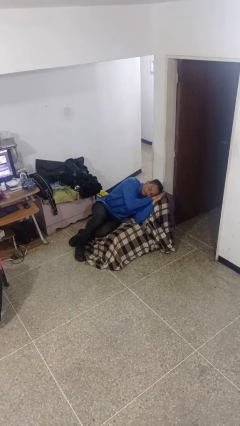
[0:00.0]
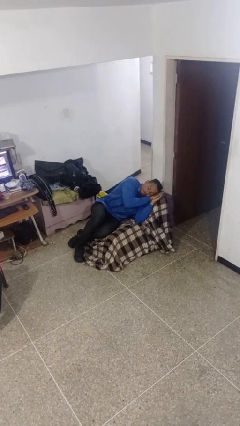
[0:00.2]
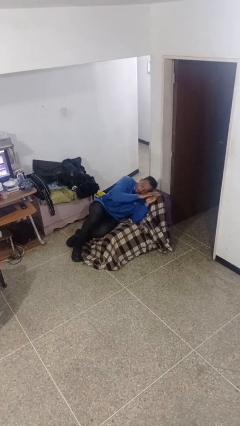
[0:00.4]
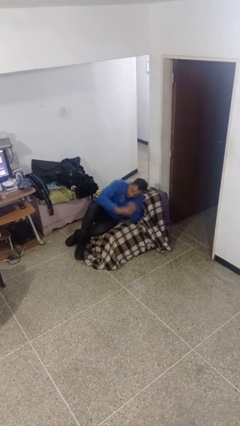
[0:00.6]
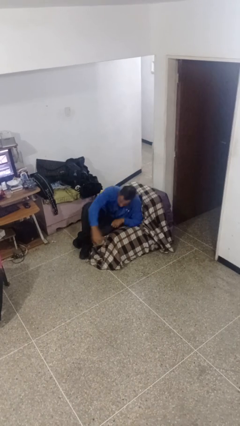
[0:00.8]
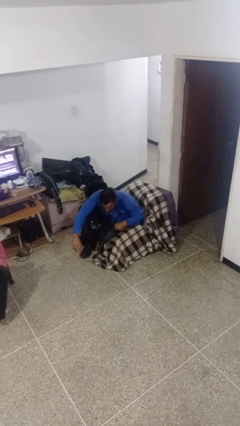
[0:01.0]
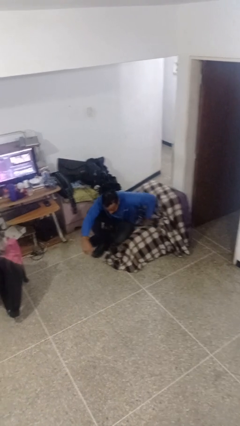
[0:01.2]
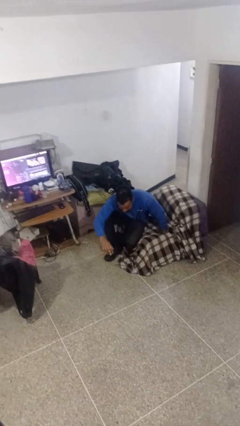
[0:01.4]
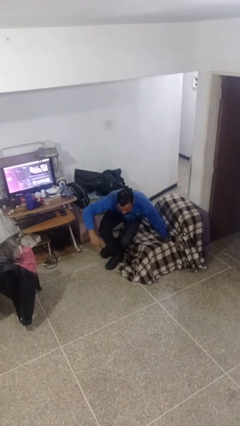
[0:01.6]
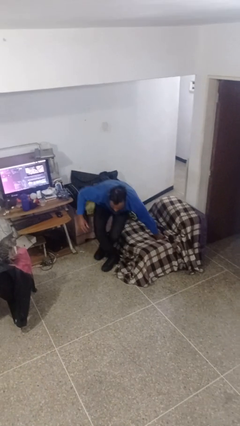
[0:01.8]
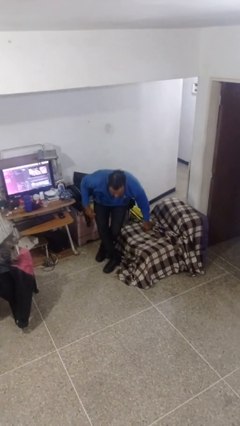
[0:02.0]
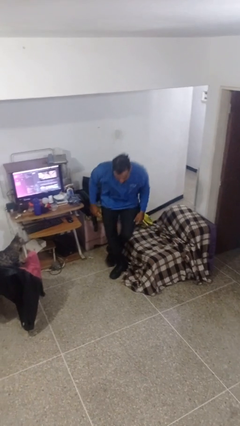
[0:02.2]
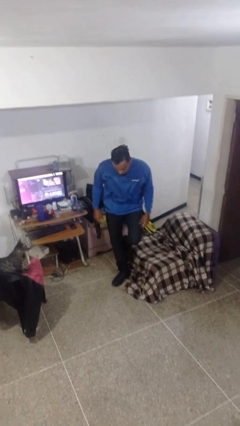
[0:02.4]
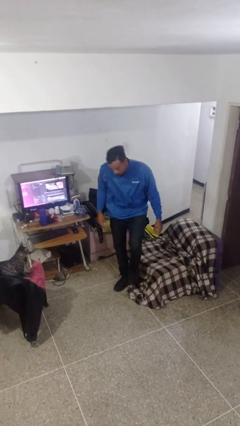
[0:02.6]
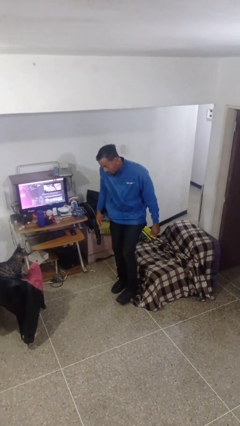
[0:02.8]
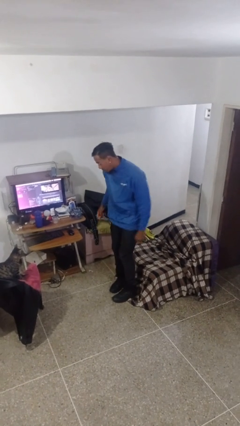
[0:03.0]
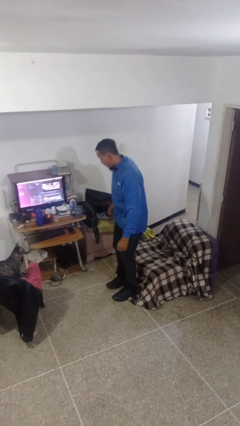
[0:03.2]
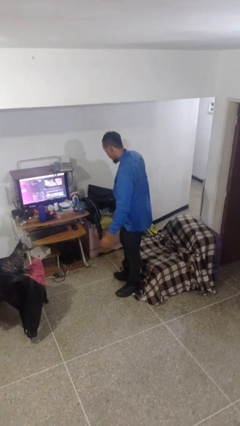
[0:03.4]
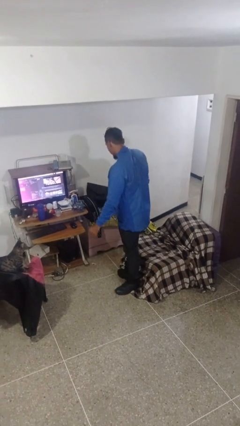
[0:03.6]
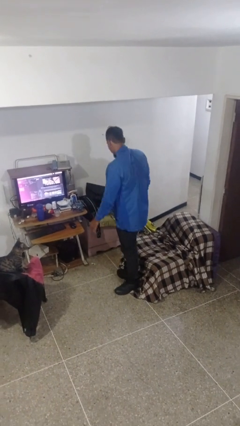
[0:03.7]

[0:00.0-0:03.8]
person stands up

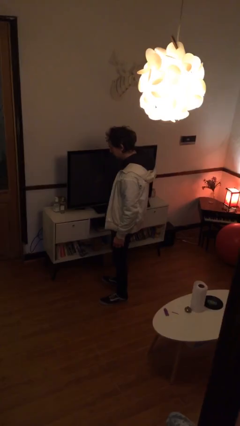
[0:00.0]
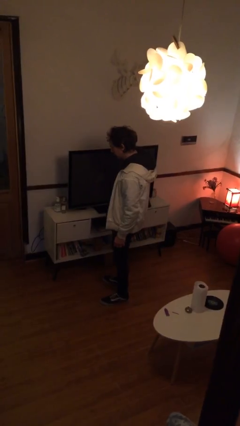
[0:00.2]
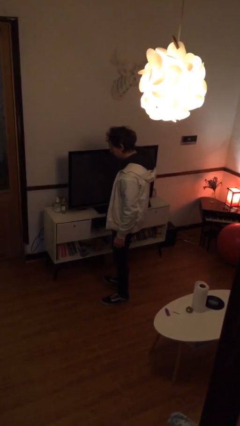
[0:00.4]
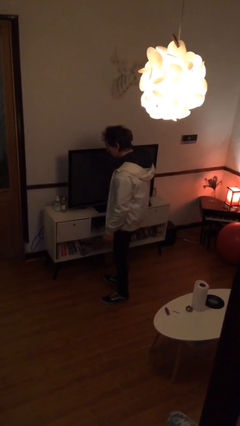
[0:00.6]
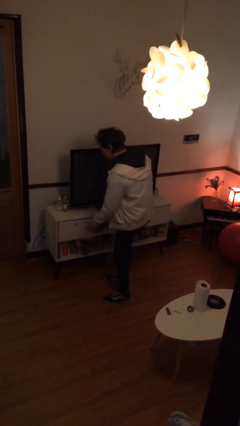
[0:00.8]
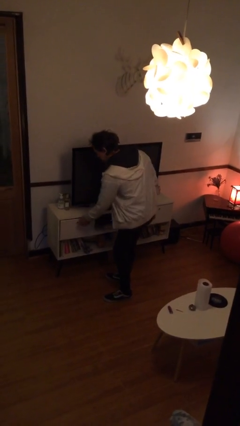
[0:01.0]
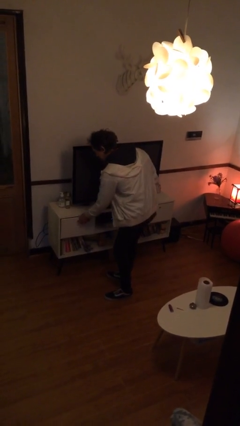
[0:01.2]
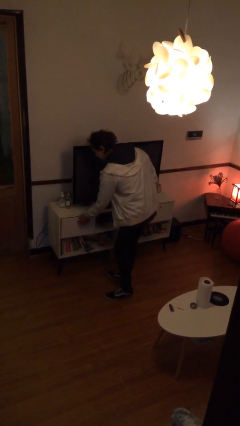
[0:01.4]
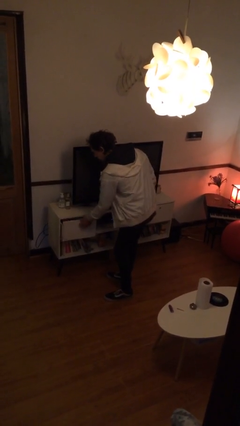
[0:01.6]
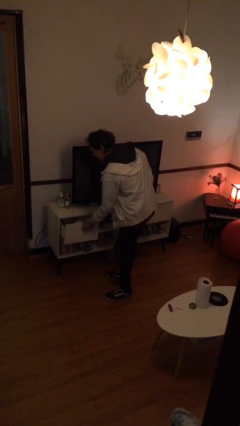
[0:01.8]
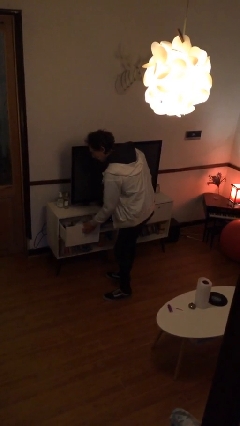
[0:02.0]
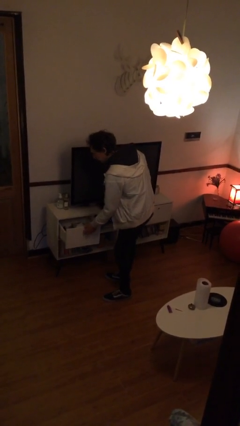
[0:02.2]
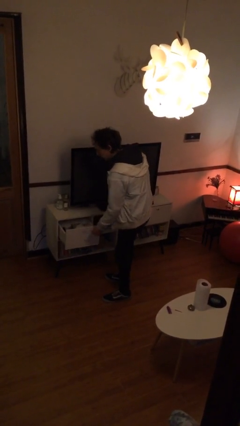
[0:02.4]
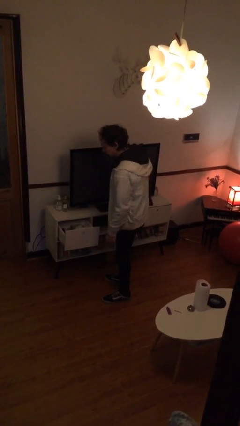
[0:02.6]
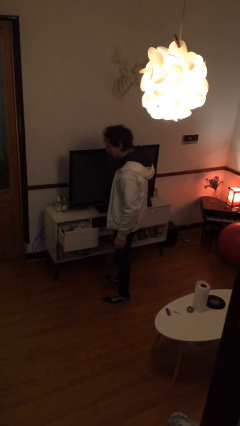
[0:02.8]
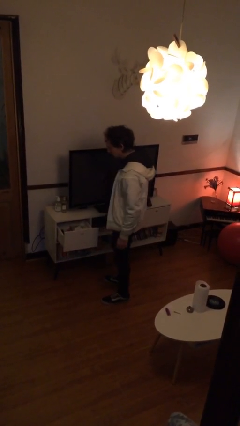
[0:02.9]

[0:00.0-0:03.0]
person opens dresser drawer

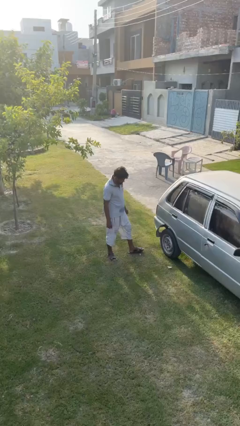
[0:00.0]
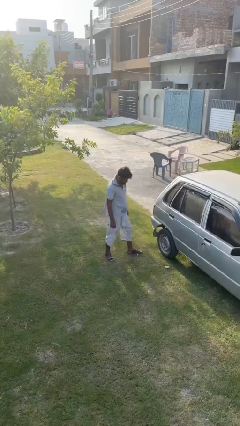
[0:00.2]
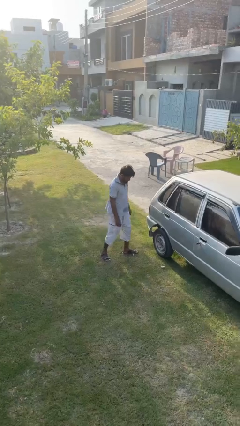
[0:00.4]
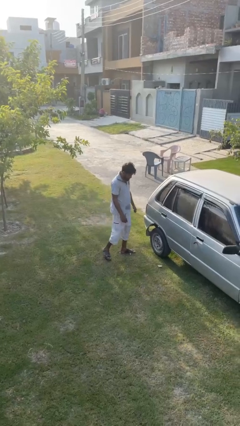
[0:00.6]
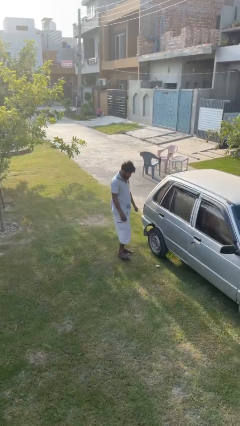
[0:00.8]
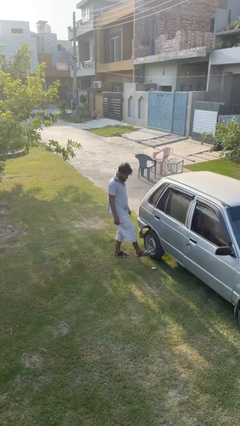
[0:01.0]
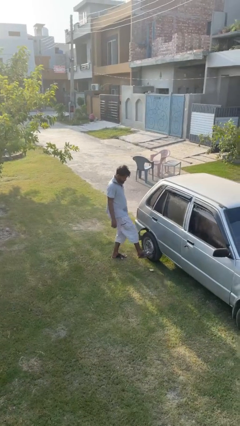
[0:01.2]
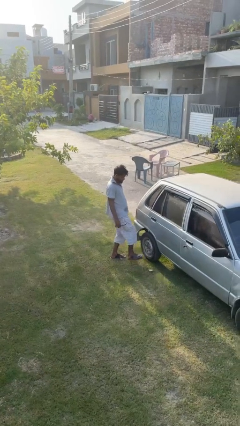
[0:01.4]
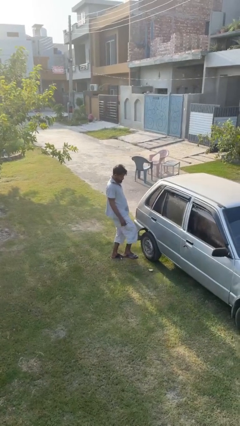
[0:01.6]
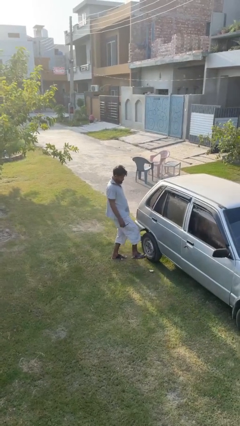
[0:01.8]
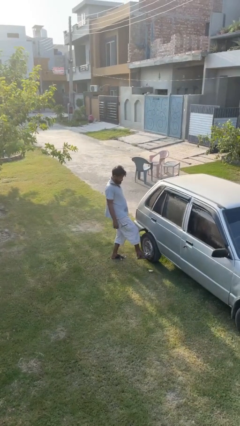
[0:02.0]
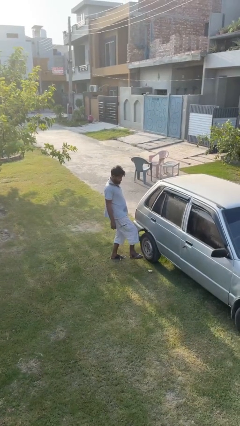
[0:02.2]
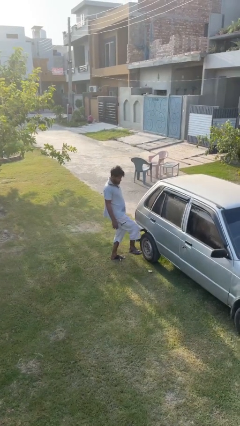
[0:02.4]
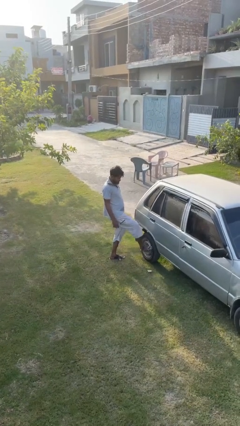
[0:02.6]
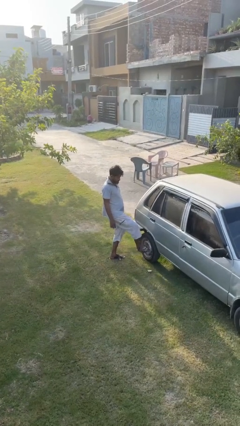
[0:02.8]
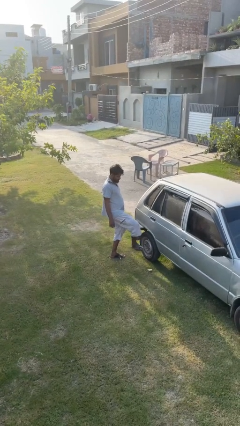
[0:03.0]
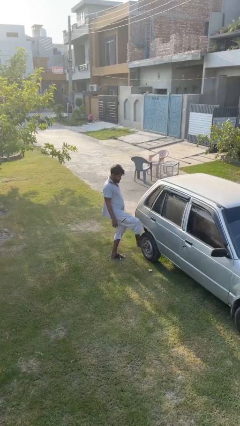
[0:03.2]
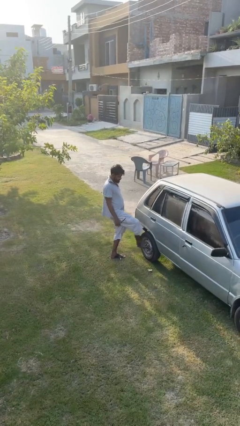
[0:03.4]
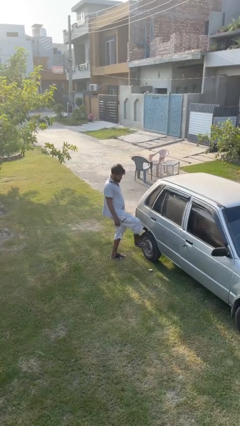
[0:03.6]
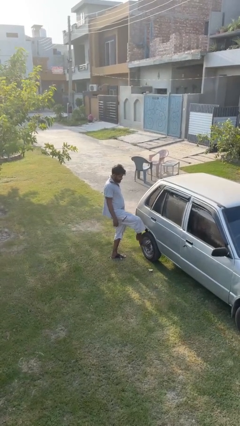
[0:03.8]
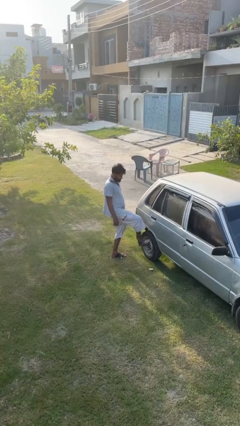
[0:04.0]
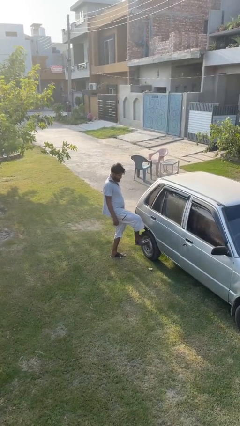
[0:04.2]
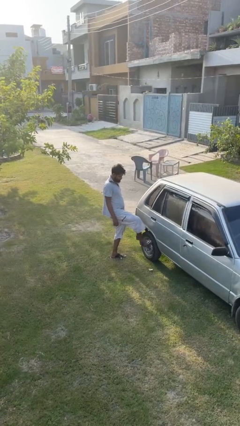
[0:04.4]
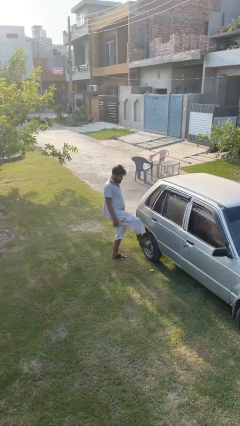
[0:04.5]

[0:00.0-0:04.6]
person kicks car tires

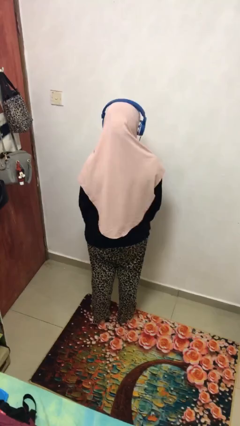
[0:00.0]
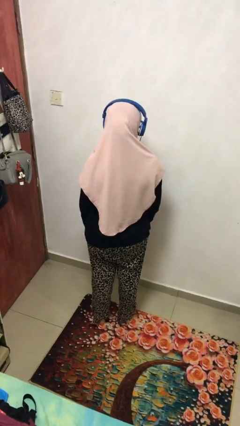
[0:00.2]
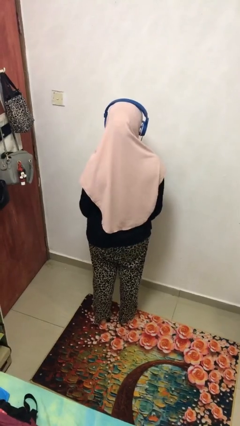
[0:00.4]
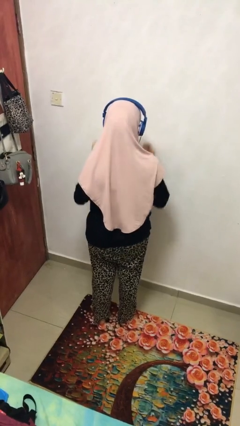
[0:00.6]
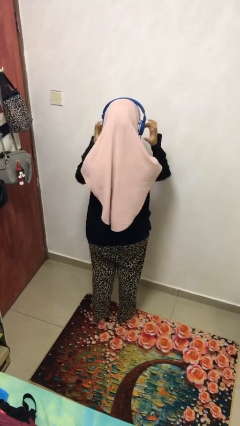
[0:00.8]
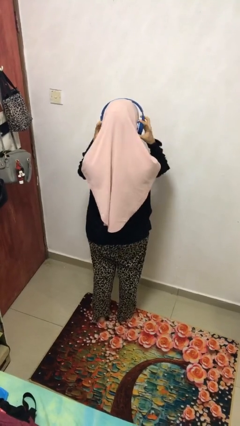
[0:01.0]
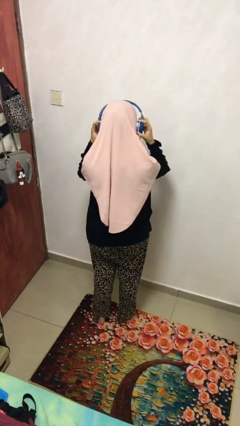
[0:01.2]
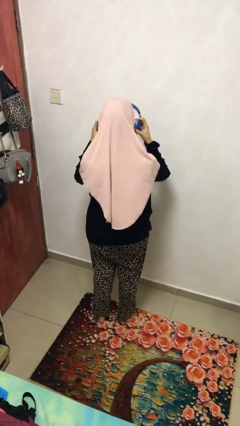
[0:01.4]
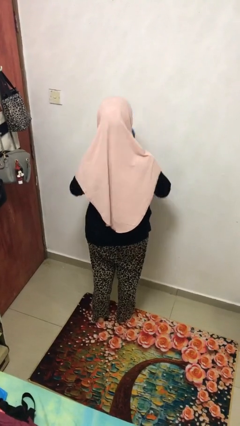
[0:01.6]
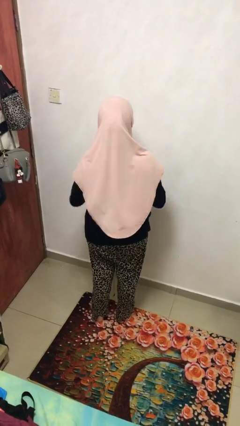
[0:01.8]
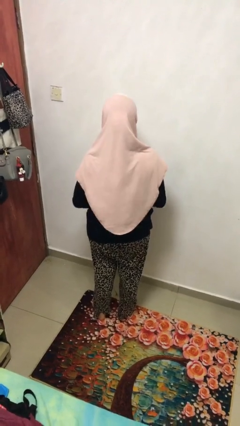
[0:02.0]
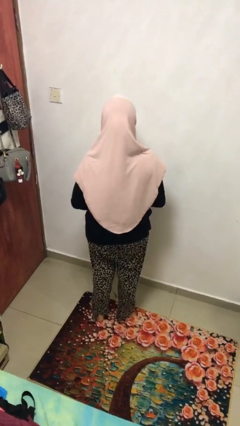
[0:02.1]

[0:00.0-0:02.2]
person takes off headphones

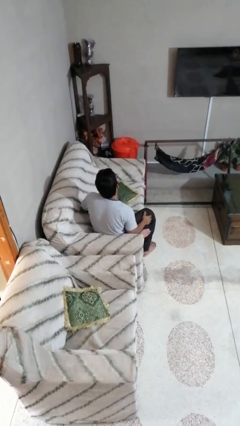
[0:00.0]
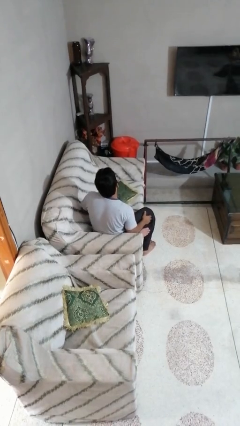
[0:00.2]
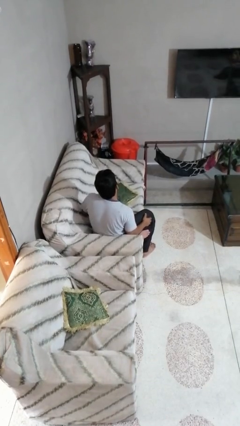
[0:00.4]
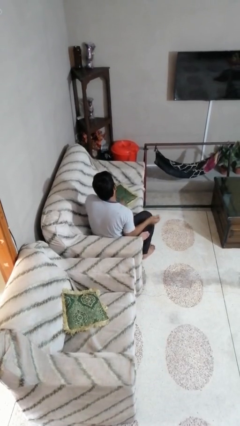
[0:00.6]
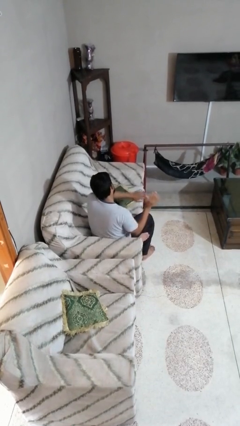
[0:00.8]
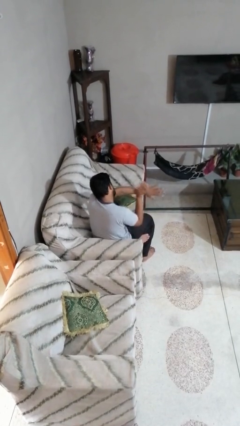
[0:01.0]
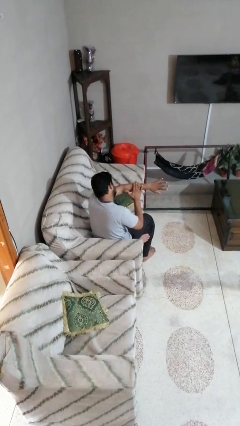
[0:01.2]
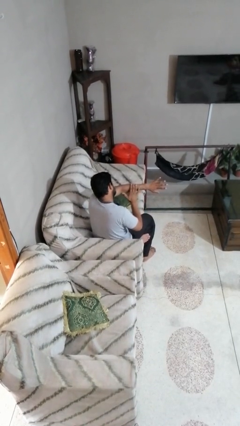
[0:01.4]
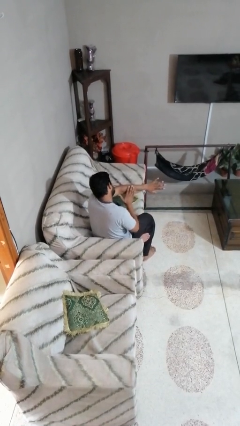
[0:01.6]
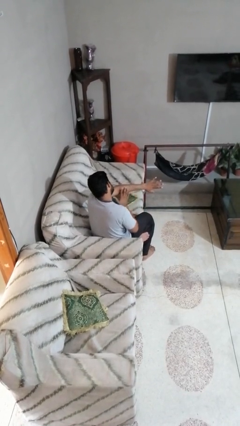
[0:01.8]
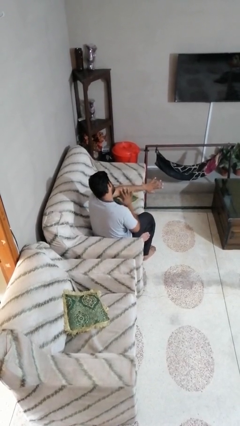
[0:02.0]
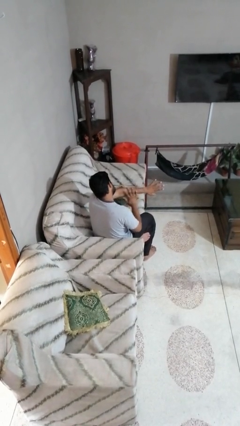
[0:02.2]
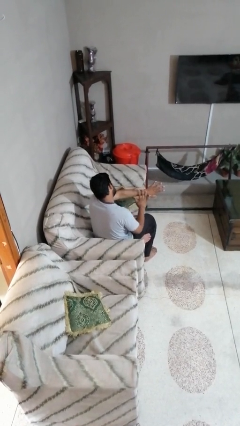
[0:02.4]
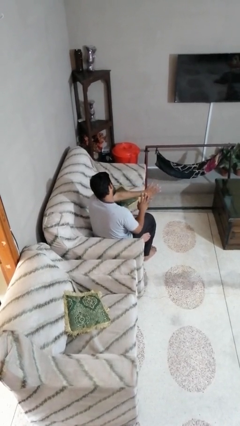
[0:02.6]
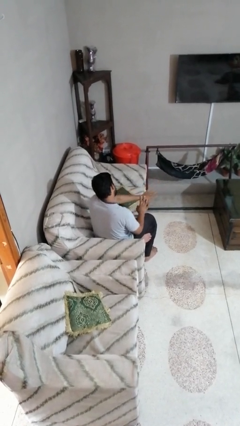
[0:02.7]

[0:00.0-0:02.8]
person swats bug

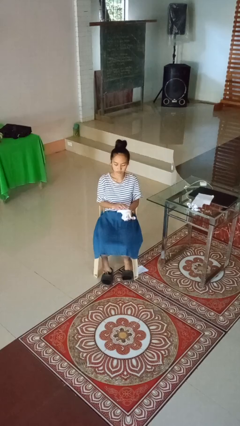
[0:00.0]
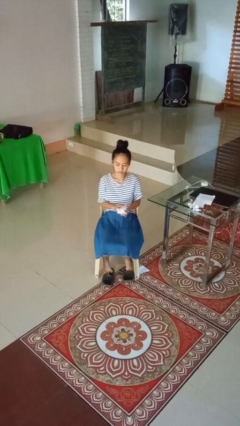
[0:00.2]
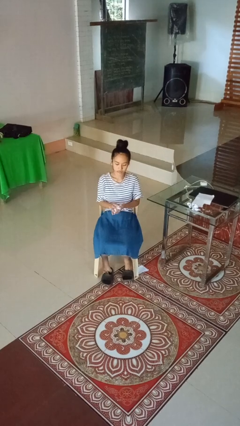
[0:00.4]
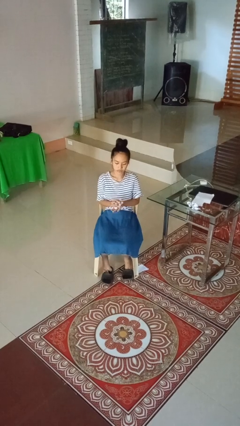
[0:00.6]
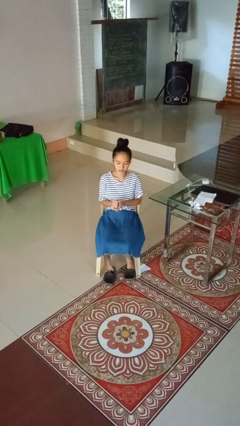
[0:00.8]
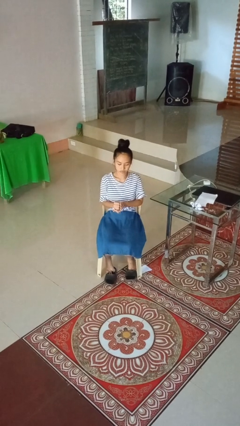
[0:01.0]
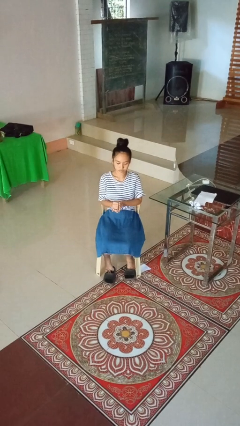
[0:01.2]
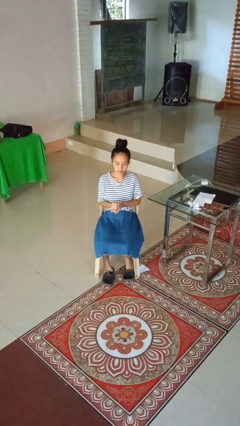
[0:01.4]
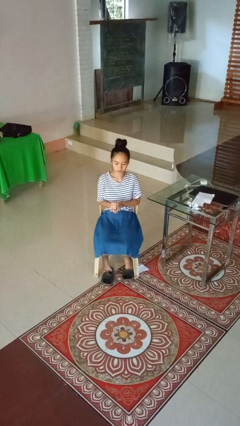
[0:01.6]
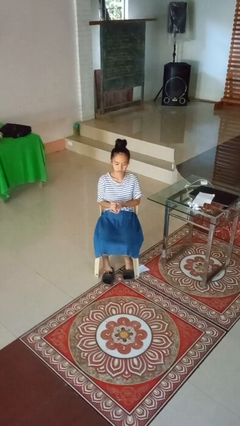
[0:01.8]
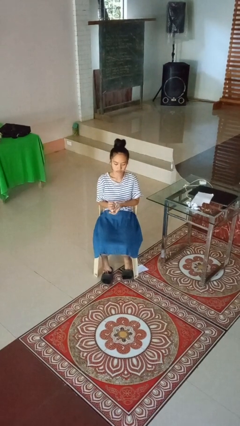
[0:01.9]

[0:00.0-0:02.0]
person crumples paper
